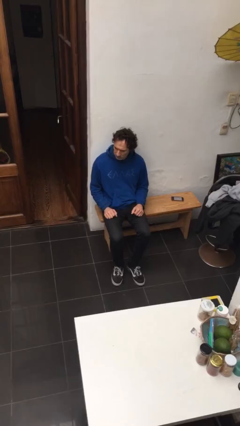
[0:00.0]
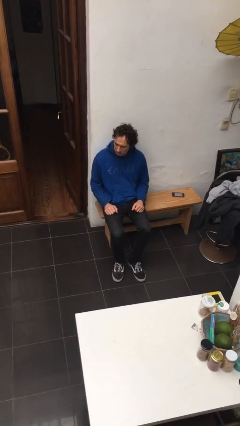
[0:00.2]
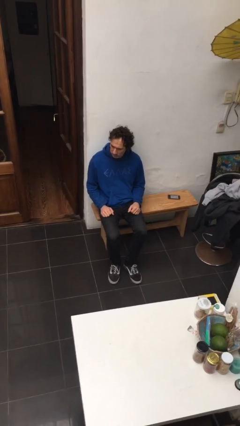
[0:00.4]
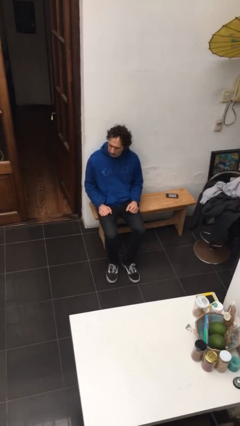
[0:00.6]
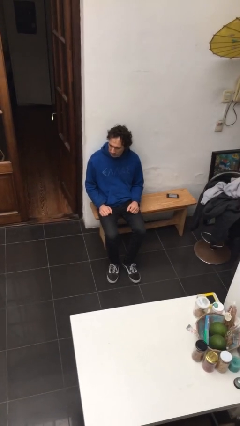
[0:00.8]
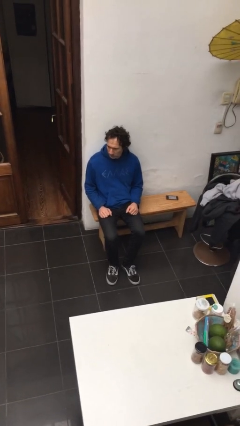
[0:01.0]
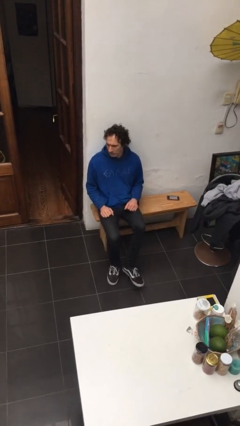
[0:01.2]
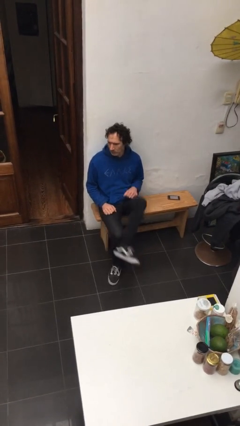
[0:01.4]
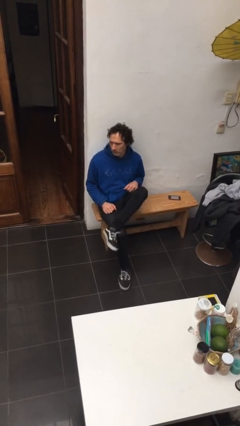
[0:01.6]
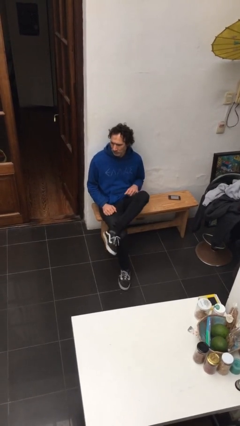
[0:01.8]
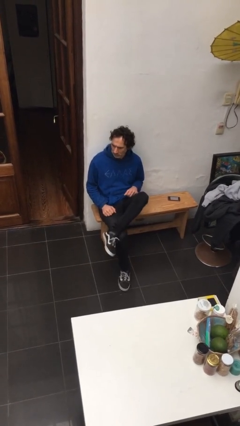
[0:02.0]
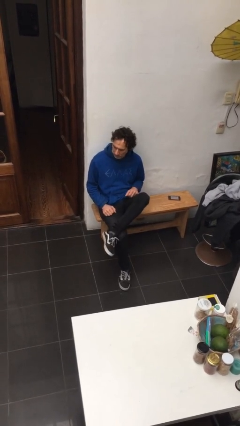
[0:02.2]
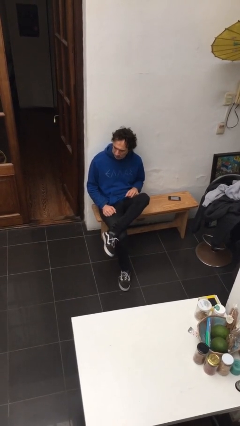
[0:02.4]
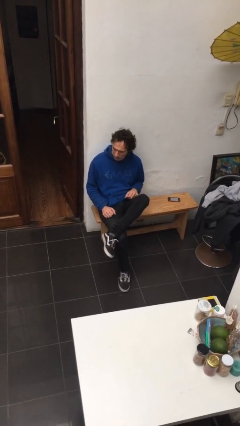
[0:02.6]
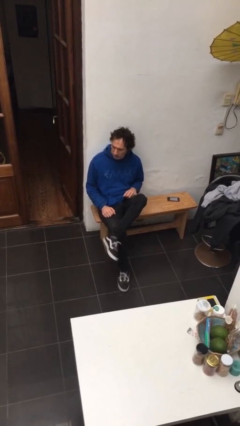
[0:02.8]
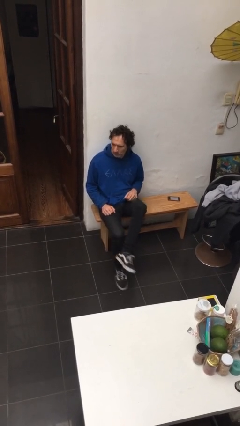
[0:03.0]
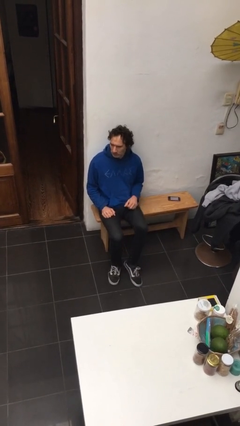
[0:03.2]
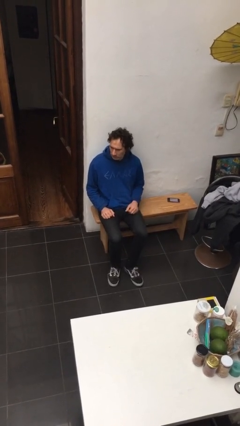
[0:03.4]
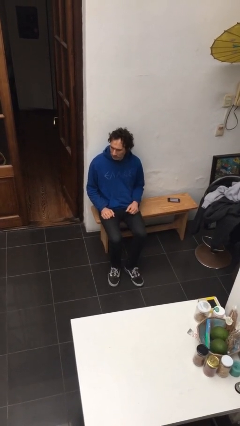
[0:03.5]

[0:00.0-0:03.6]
person crosses legs

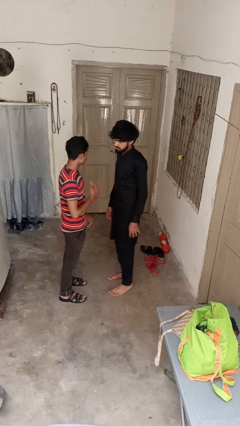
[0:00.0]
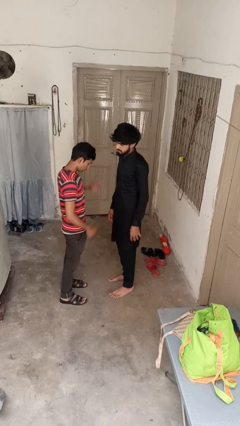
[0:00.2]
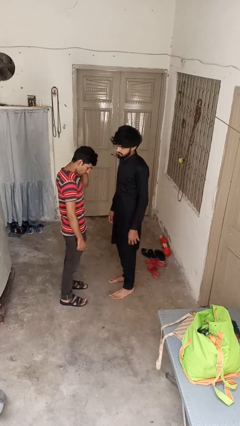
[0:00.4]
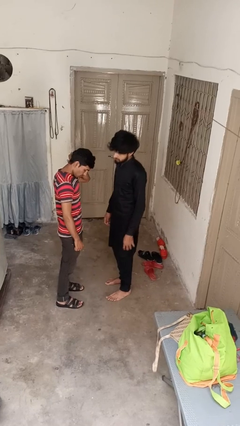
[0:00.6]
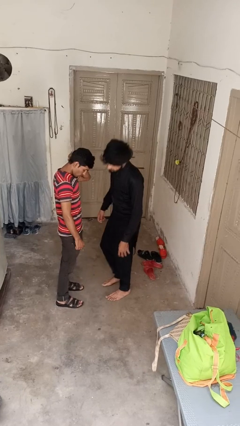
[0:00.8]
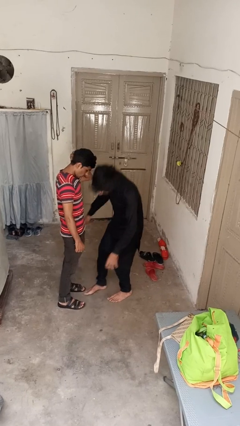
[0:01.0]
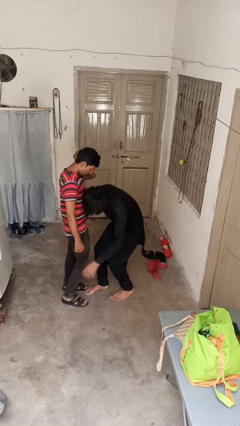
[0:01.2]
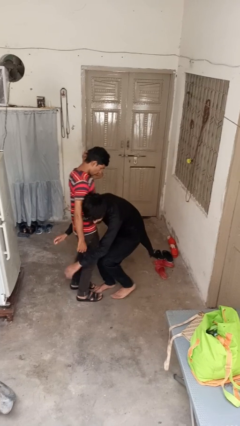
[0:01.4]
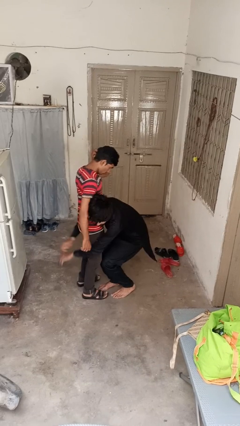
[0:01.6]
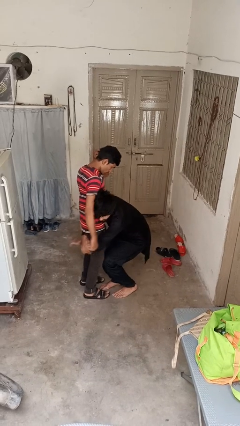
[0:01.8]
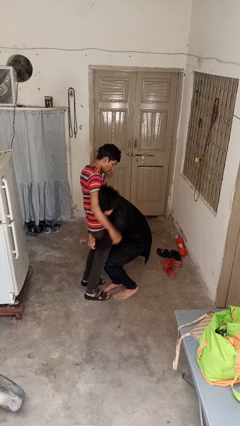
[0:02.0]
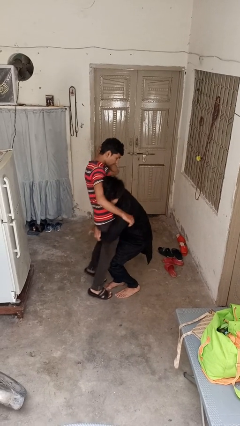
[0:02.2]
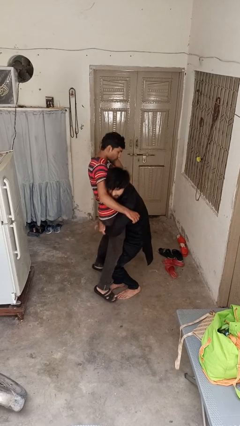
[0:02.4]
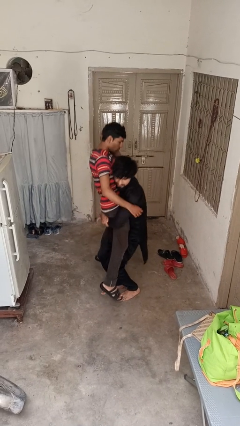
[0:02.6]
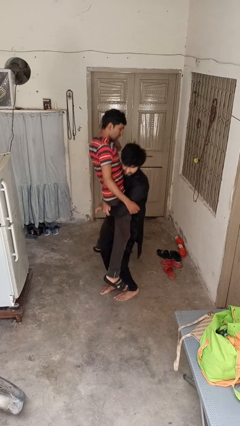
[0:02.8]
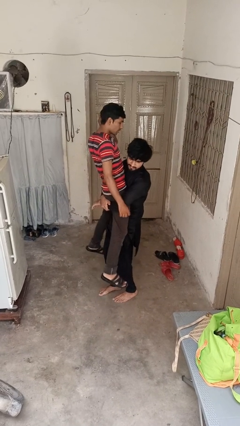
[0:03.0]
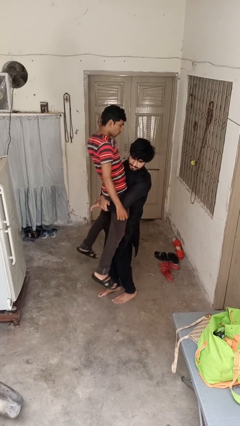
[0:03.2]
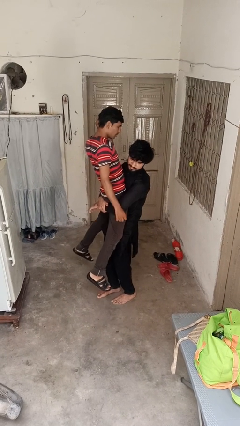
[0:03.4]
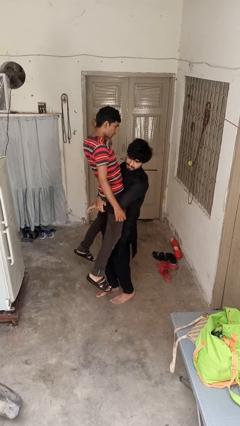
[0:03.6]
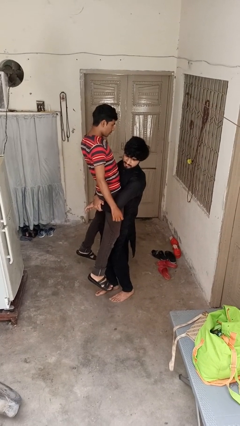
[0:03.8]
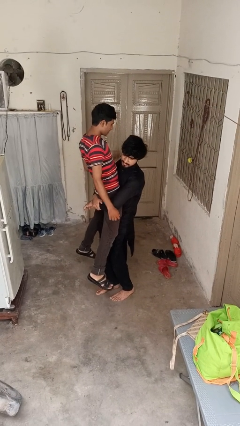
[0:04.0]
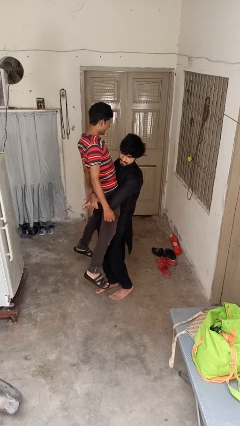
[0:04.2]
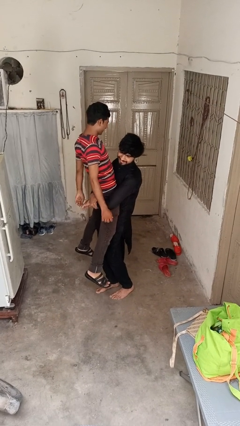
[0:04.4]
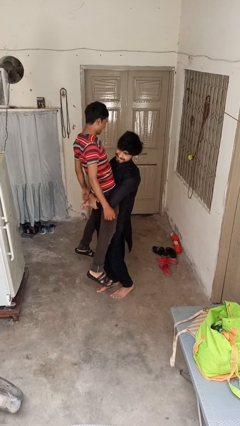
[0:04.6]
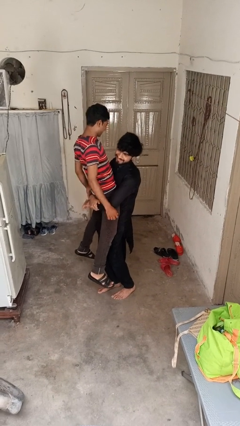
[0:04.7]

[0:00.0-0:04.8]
person picks up person

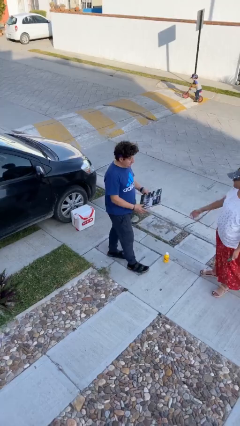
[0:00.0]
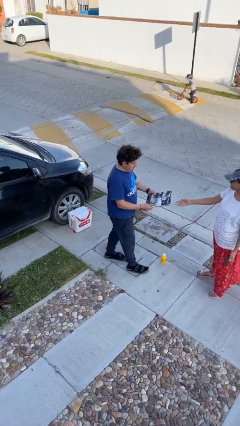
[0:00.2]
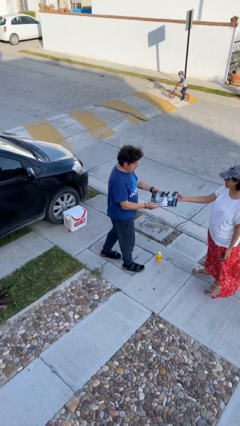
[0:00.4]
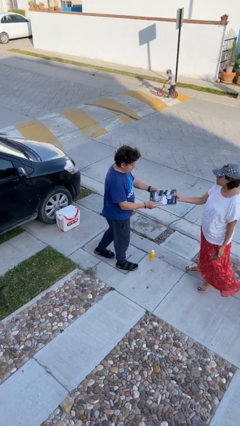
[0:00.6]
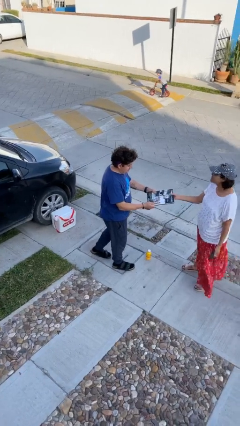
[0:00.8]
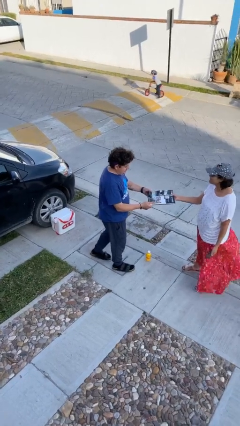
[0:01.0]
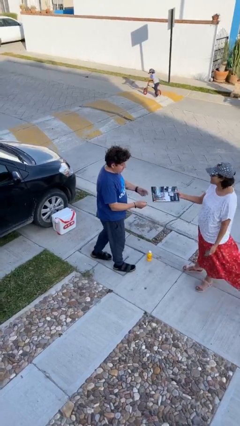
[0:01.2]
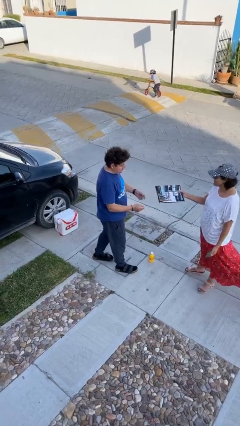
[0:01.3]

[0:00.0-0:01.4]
person transfers object to person

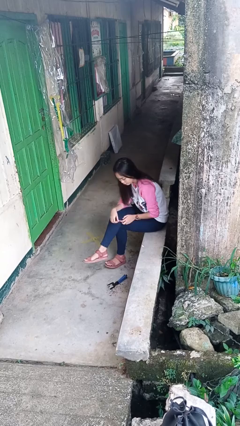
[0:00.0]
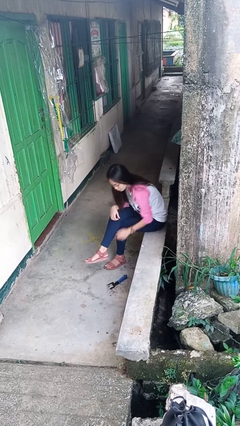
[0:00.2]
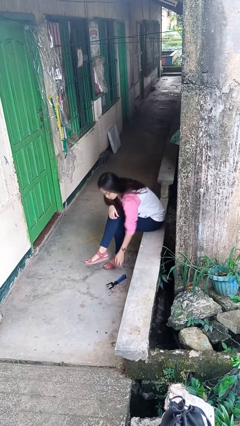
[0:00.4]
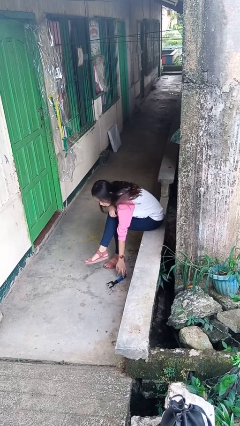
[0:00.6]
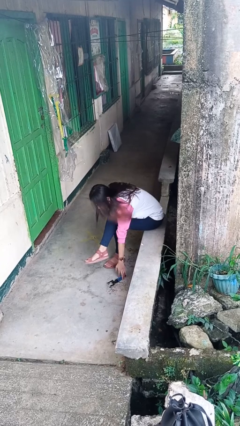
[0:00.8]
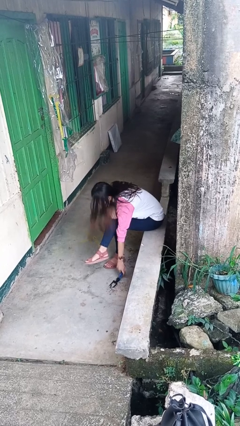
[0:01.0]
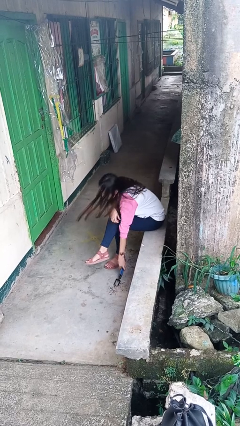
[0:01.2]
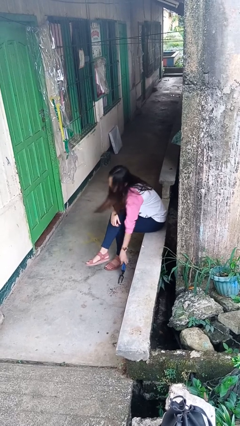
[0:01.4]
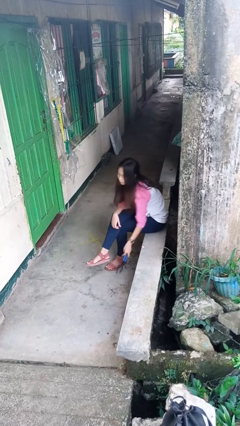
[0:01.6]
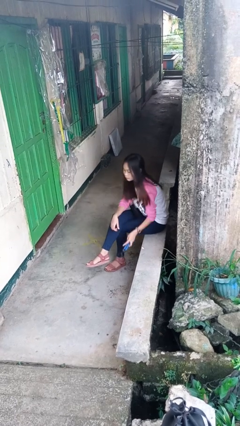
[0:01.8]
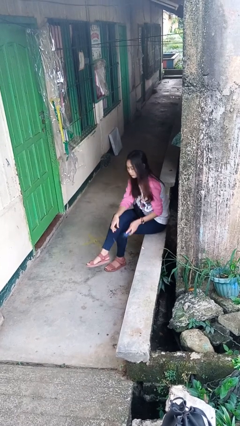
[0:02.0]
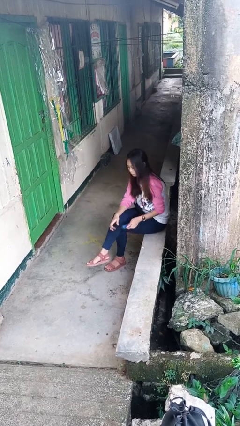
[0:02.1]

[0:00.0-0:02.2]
person picks up object from floor

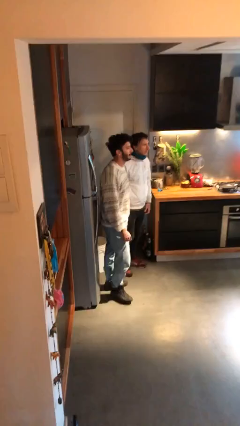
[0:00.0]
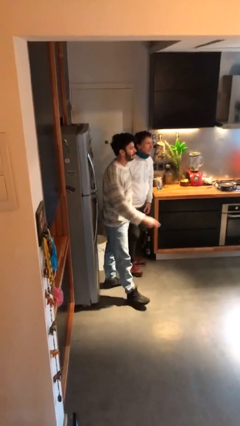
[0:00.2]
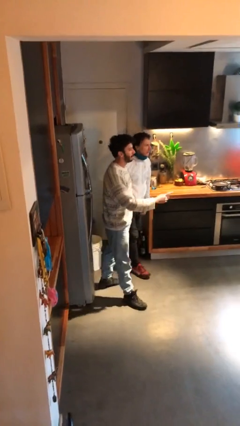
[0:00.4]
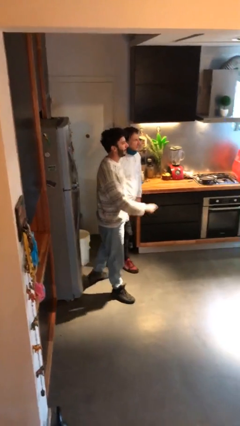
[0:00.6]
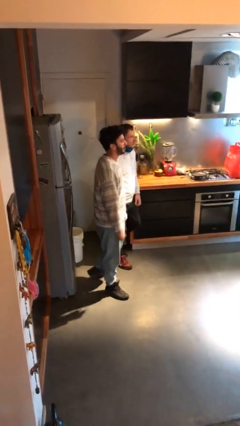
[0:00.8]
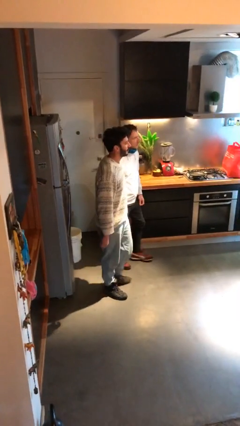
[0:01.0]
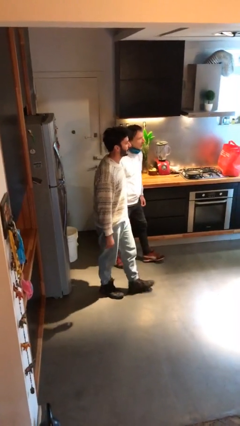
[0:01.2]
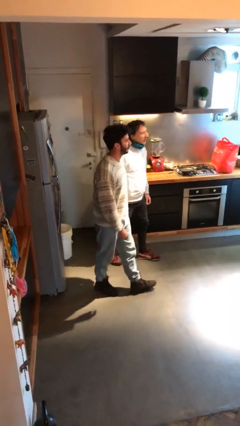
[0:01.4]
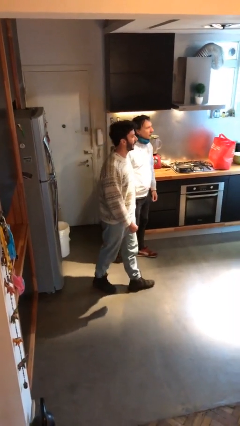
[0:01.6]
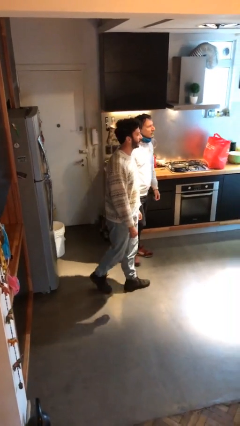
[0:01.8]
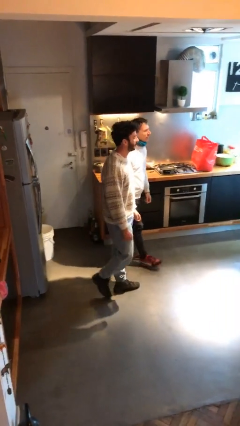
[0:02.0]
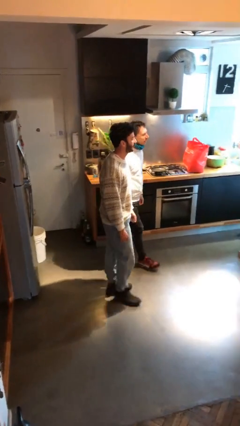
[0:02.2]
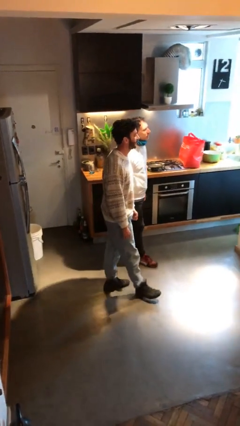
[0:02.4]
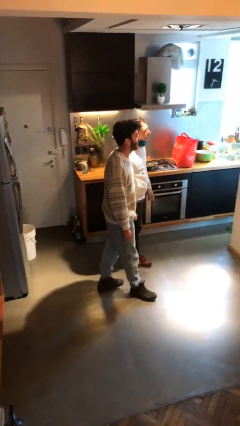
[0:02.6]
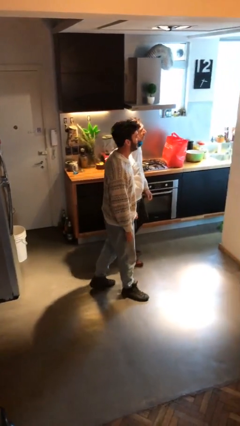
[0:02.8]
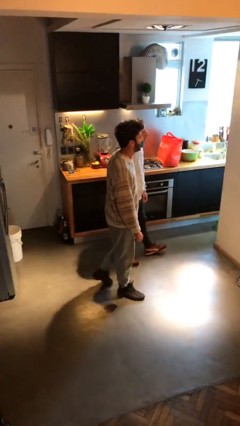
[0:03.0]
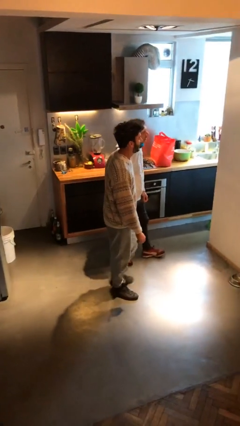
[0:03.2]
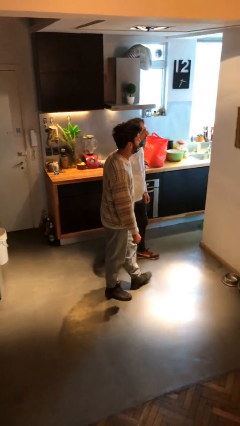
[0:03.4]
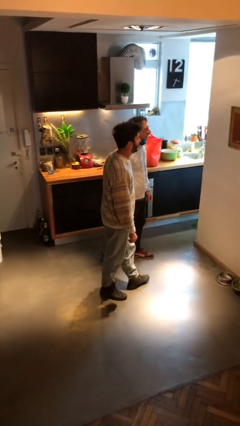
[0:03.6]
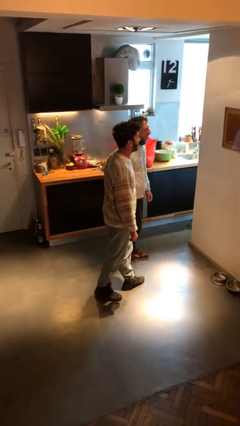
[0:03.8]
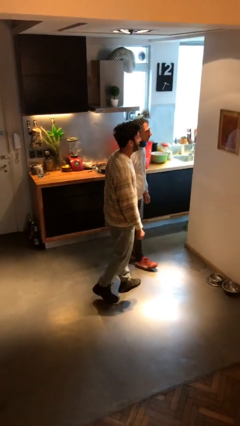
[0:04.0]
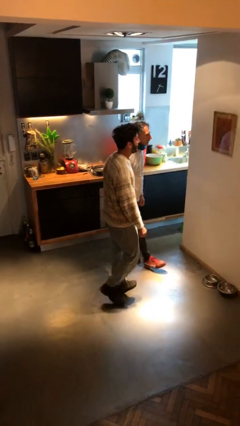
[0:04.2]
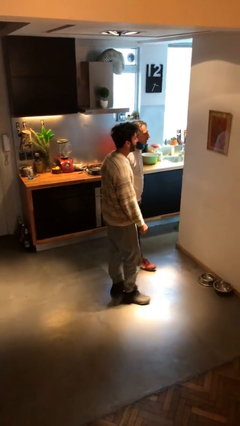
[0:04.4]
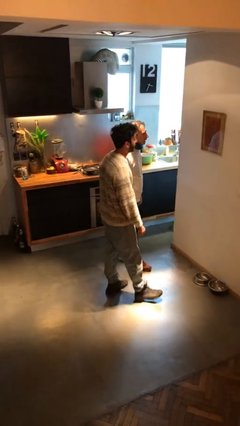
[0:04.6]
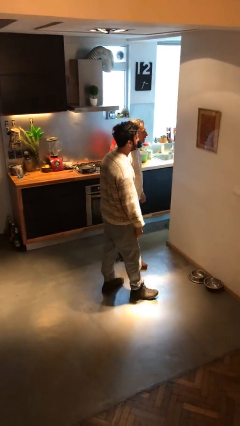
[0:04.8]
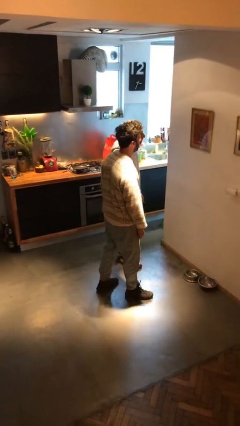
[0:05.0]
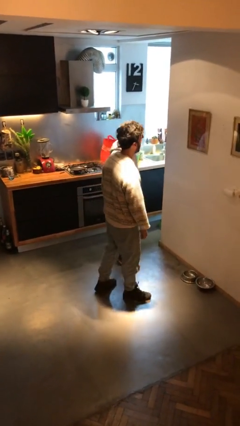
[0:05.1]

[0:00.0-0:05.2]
person talks to person

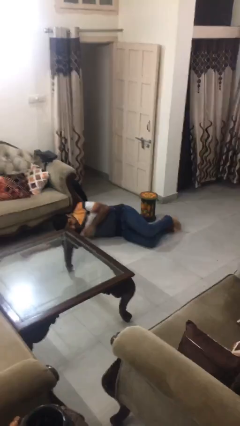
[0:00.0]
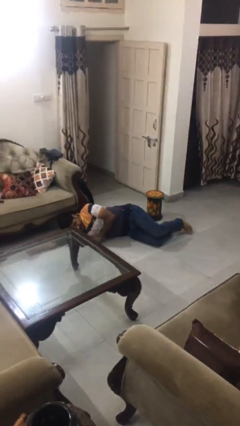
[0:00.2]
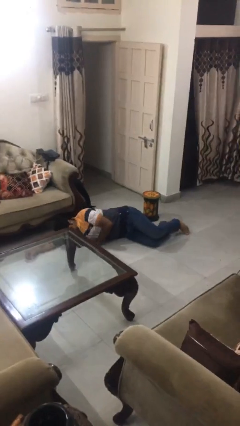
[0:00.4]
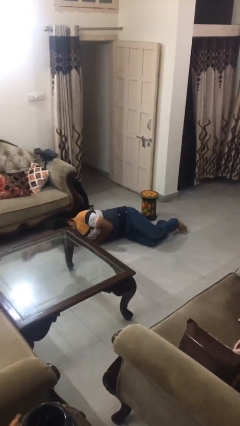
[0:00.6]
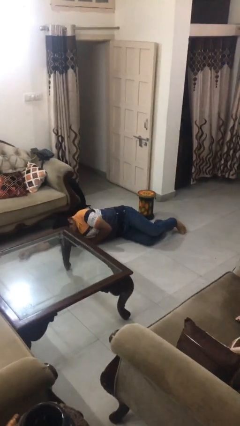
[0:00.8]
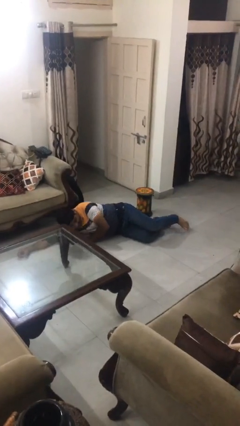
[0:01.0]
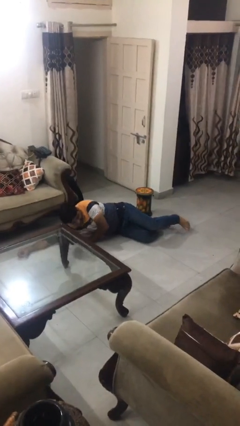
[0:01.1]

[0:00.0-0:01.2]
person lies down on floor
